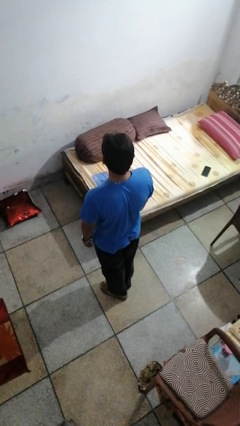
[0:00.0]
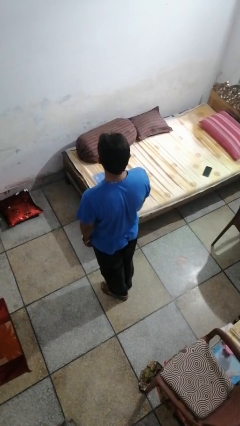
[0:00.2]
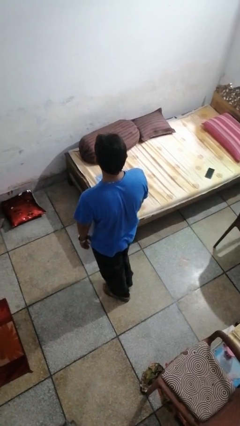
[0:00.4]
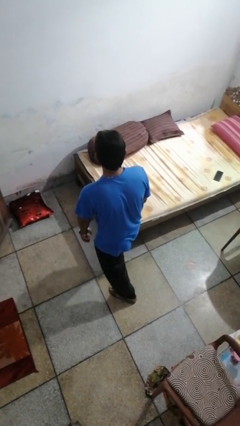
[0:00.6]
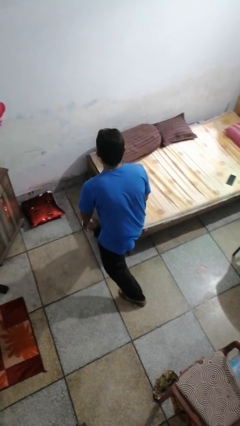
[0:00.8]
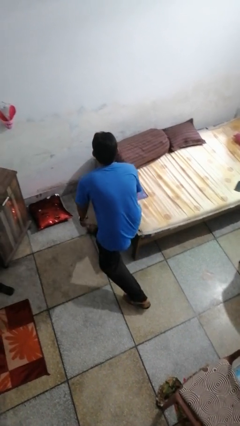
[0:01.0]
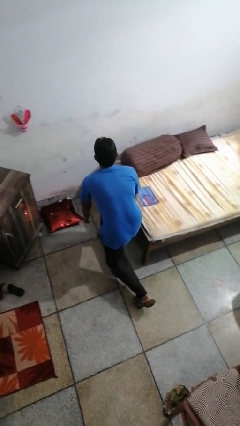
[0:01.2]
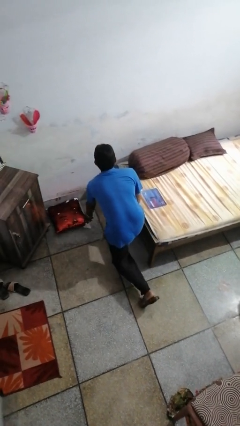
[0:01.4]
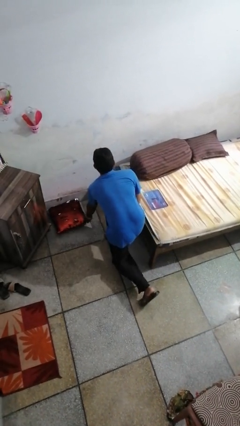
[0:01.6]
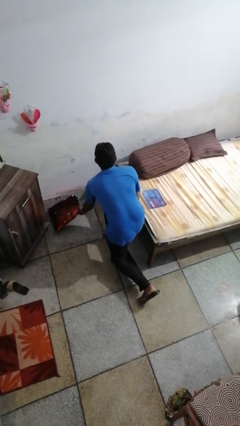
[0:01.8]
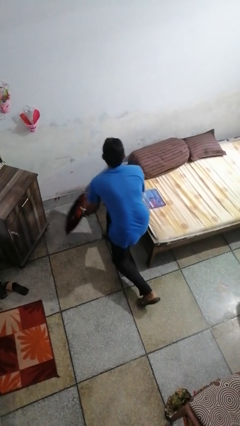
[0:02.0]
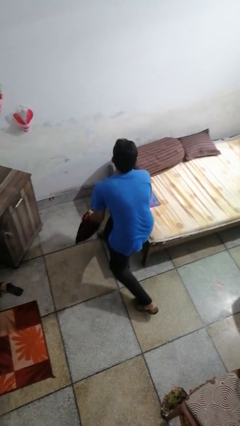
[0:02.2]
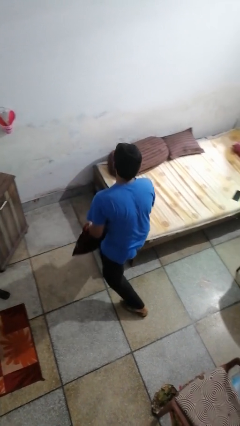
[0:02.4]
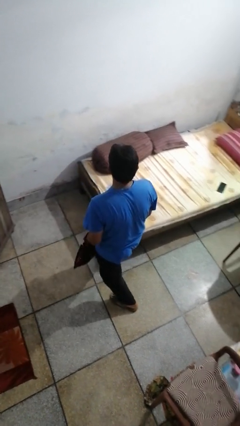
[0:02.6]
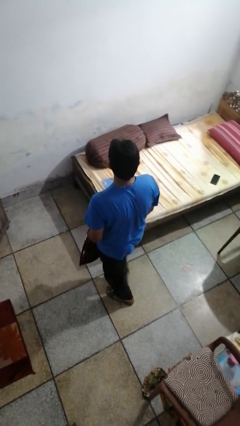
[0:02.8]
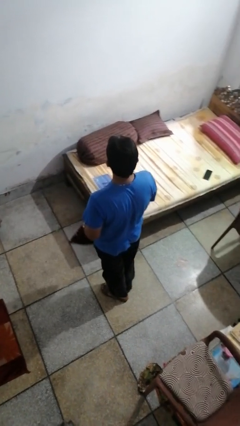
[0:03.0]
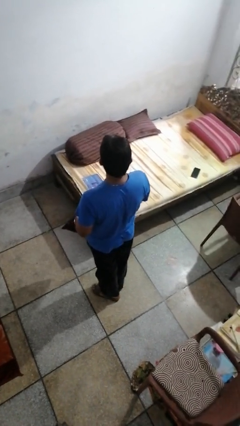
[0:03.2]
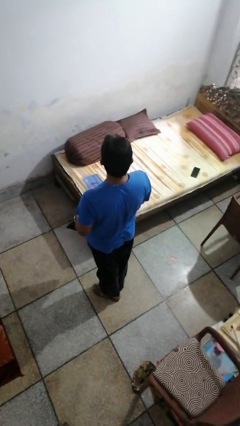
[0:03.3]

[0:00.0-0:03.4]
person picks up object from floor

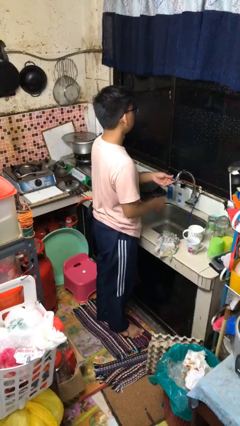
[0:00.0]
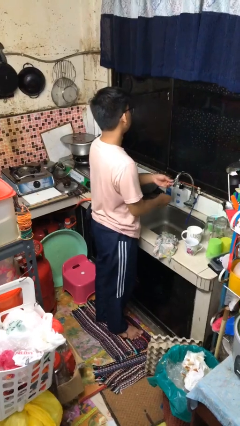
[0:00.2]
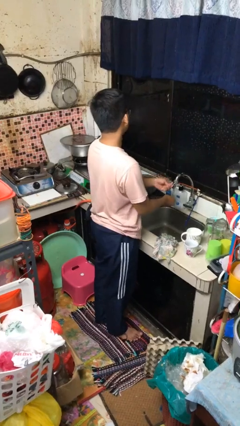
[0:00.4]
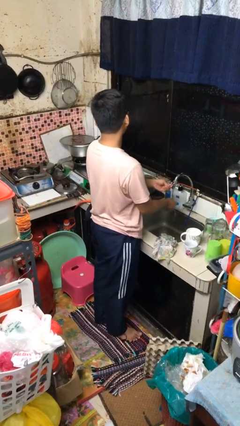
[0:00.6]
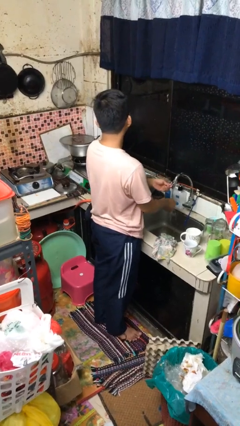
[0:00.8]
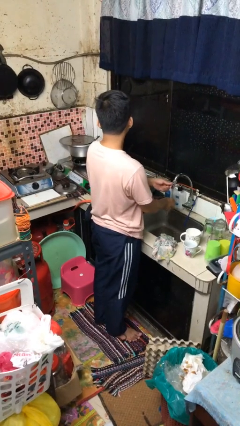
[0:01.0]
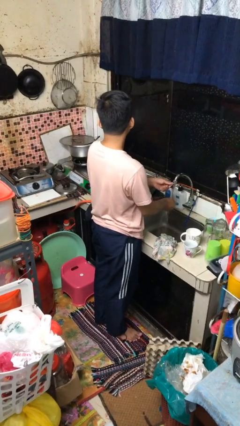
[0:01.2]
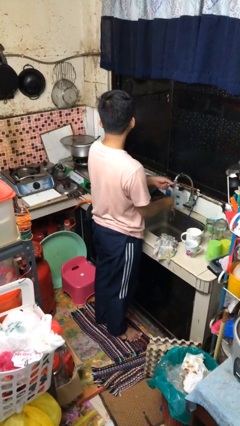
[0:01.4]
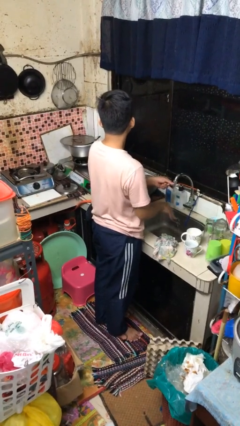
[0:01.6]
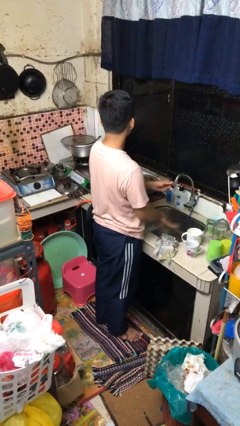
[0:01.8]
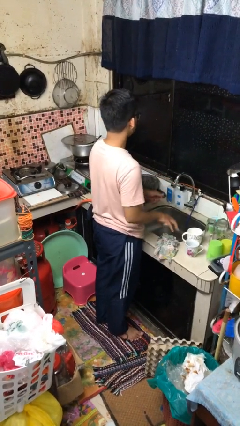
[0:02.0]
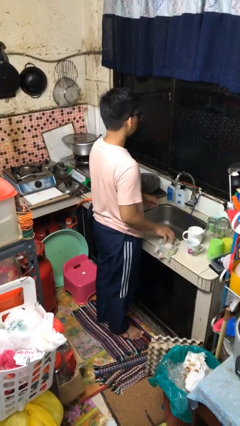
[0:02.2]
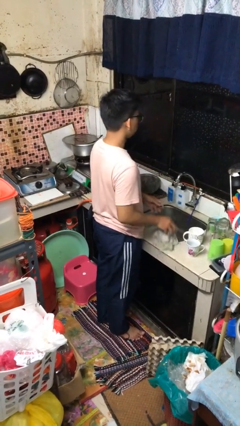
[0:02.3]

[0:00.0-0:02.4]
person washes hands

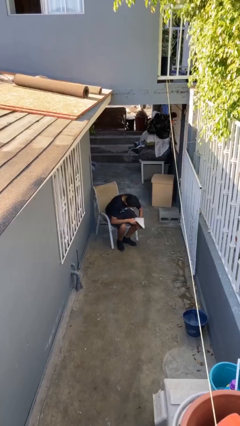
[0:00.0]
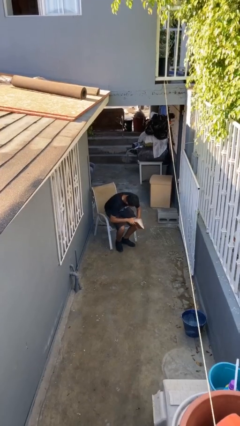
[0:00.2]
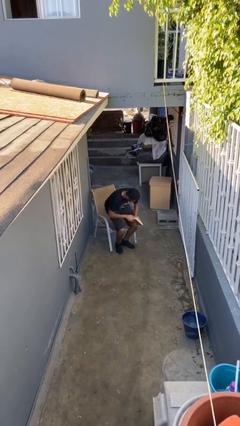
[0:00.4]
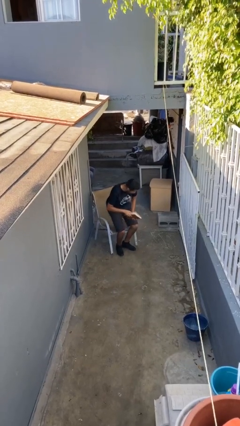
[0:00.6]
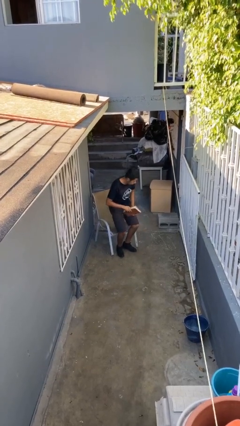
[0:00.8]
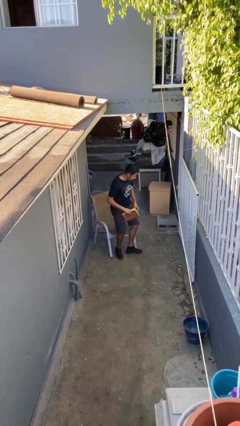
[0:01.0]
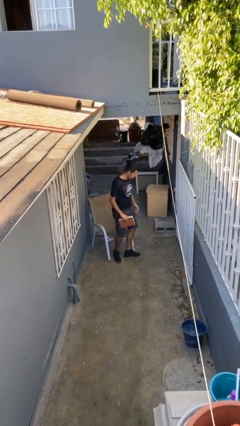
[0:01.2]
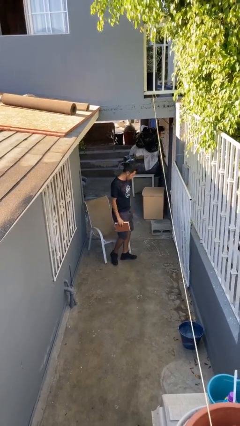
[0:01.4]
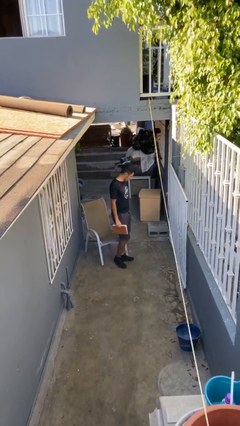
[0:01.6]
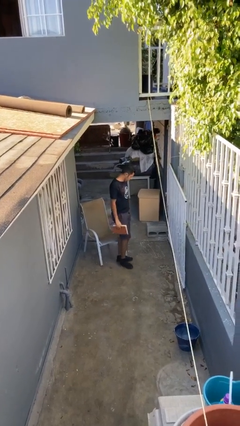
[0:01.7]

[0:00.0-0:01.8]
person stands up

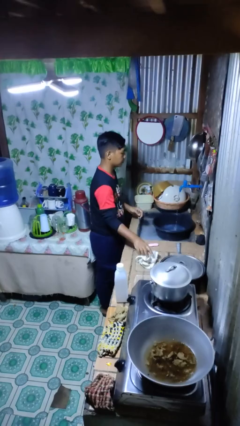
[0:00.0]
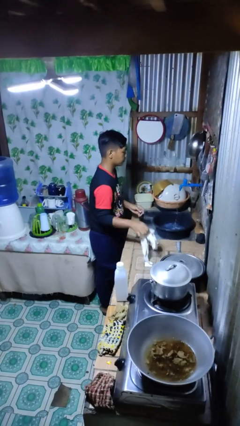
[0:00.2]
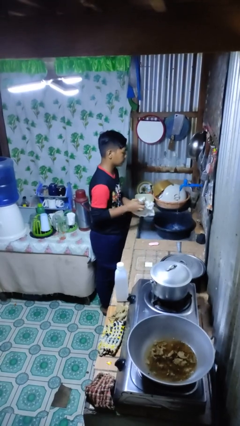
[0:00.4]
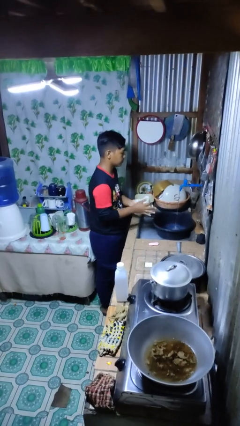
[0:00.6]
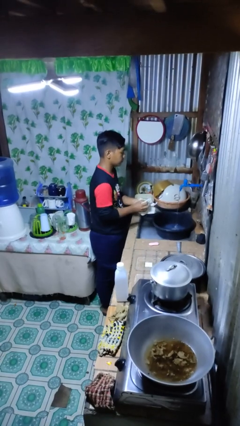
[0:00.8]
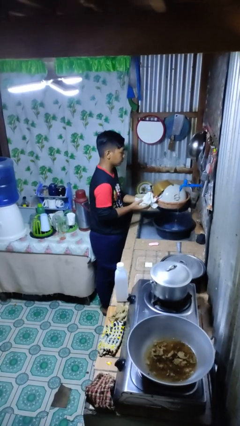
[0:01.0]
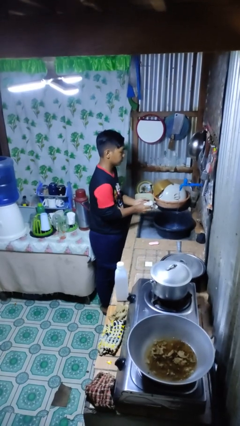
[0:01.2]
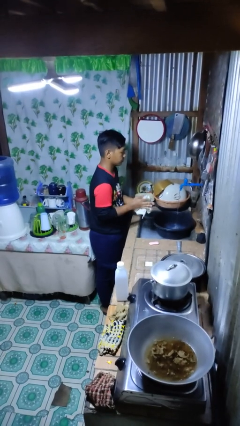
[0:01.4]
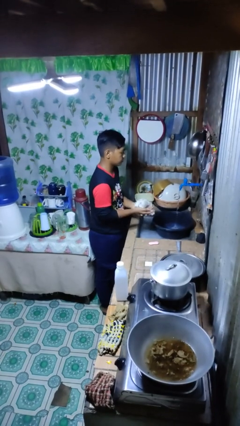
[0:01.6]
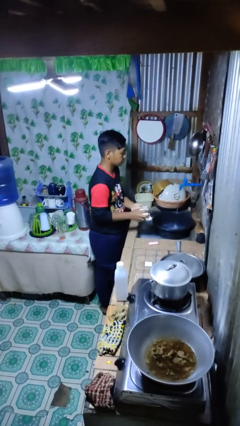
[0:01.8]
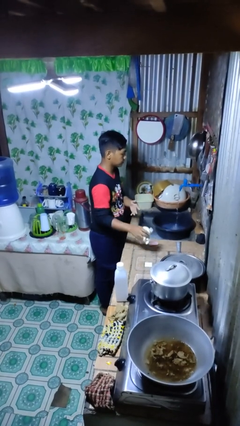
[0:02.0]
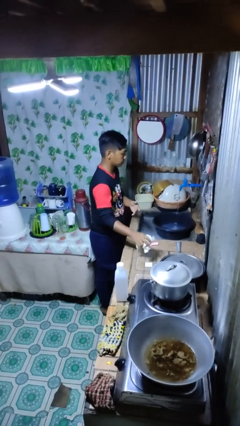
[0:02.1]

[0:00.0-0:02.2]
person dries hands with towel

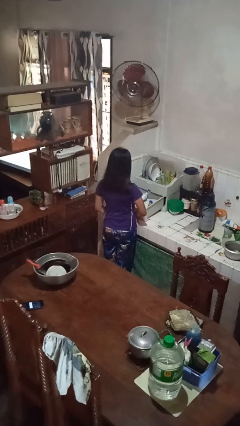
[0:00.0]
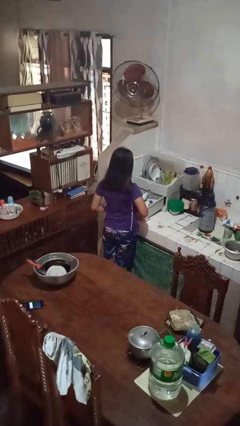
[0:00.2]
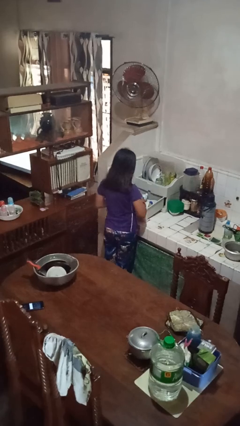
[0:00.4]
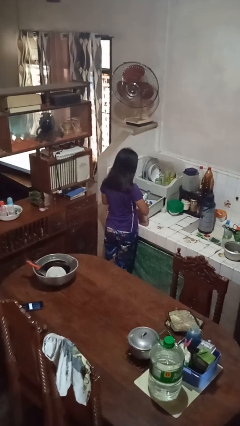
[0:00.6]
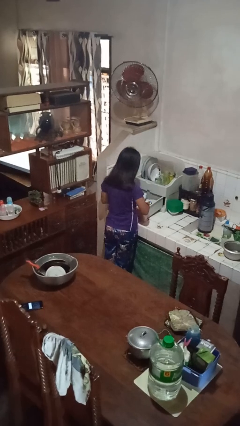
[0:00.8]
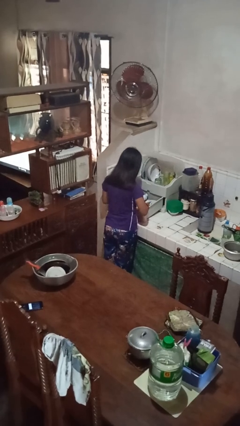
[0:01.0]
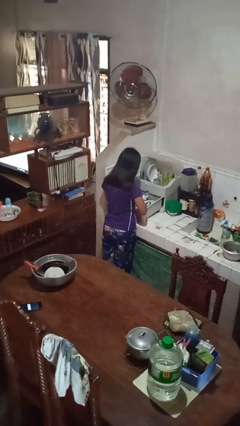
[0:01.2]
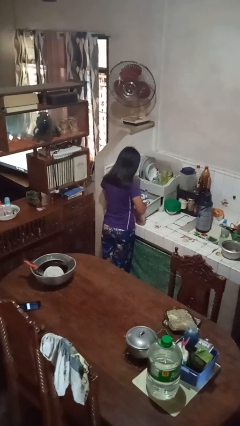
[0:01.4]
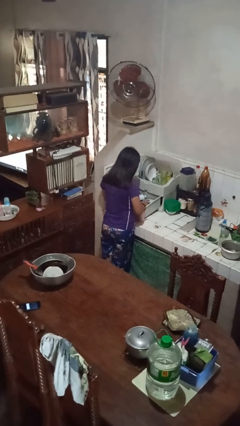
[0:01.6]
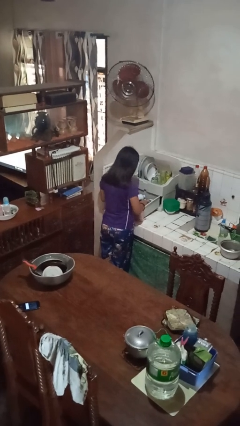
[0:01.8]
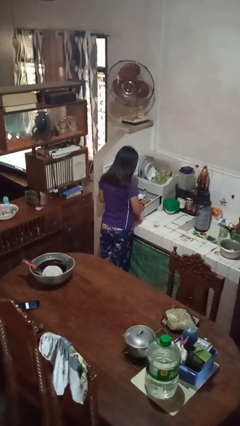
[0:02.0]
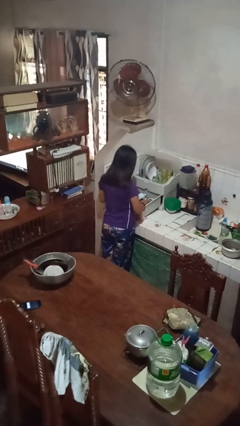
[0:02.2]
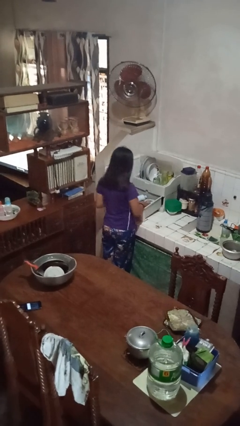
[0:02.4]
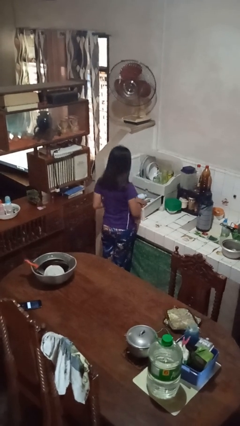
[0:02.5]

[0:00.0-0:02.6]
person searches in kitchen drawer

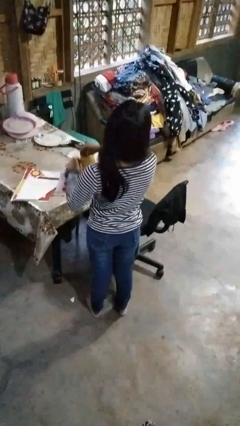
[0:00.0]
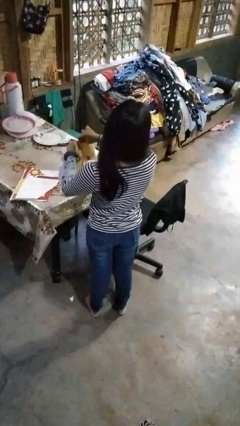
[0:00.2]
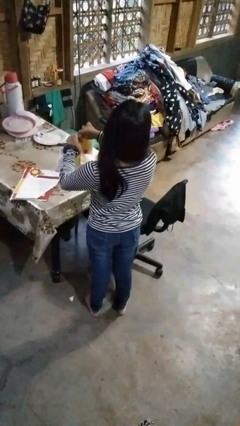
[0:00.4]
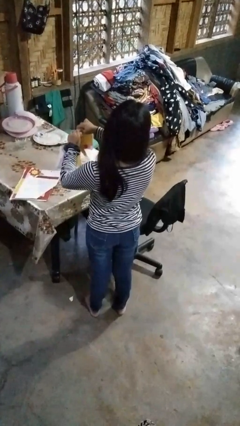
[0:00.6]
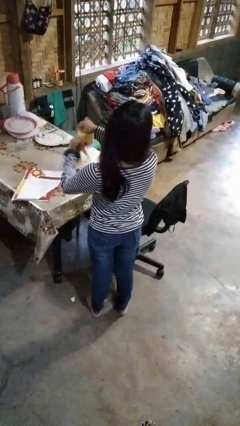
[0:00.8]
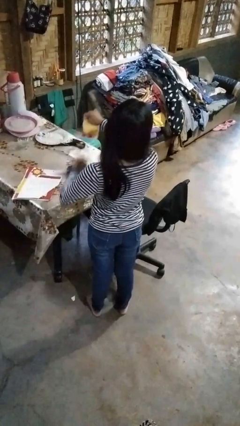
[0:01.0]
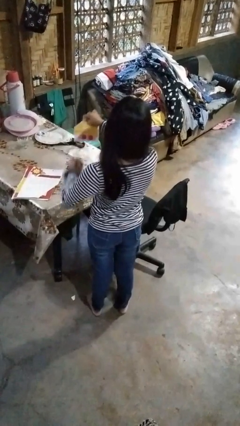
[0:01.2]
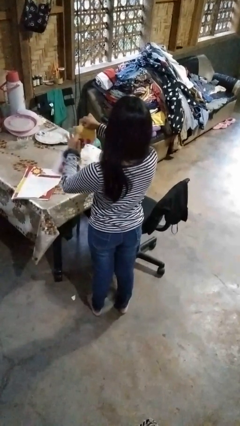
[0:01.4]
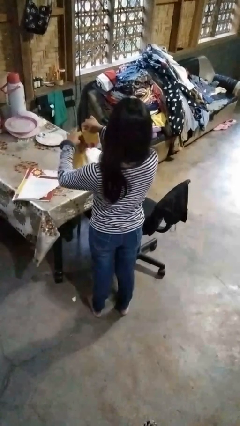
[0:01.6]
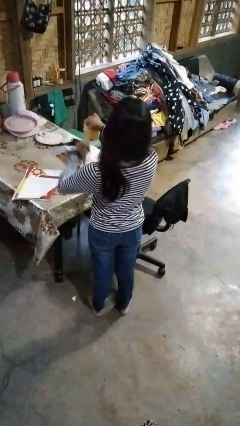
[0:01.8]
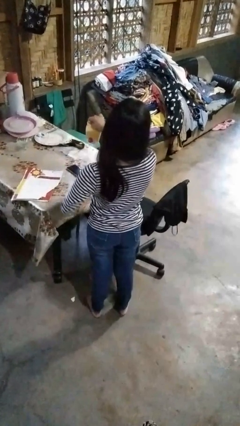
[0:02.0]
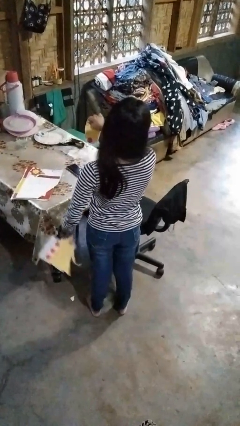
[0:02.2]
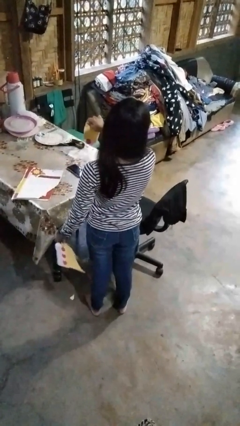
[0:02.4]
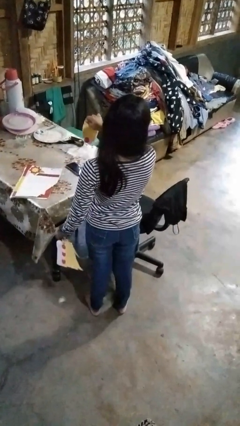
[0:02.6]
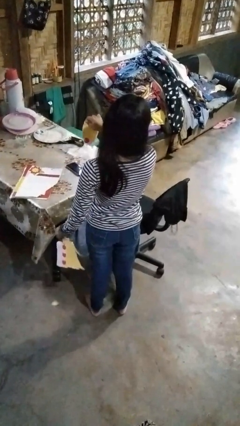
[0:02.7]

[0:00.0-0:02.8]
person tears paper

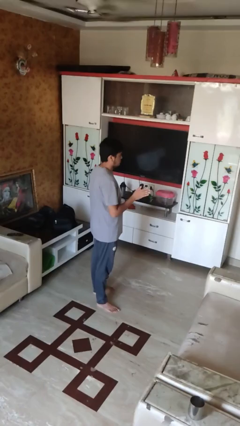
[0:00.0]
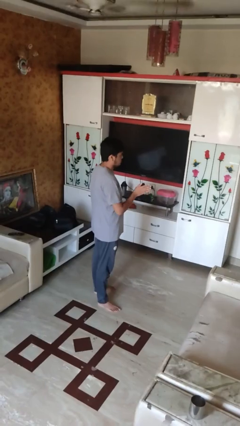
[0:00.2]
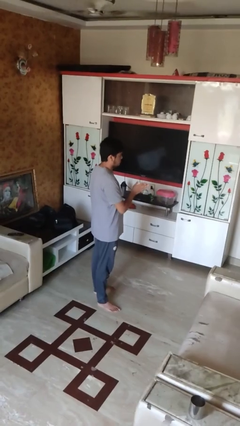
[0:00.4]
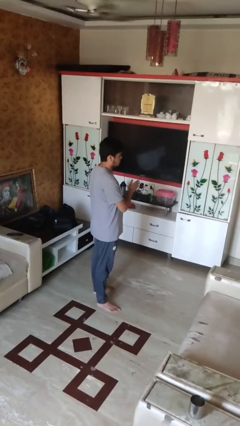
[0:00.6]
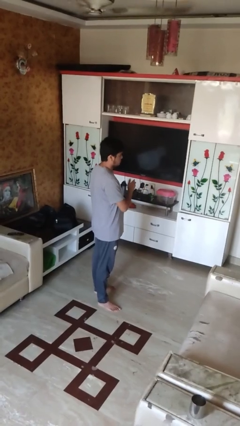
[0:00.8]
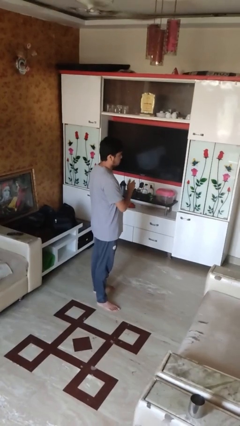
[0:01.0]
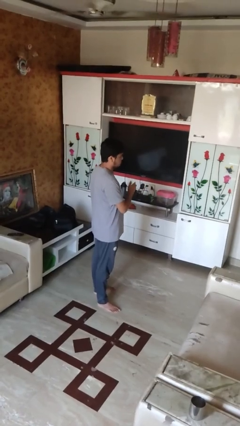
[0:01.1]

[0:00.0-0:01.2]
person gestures swipe right

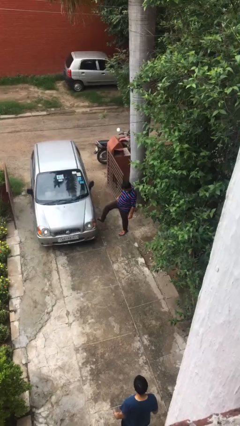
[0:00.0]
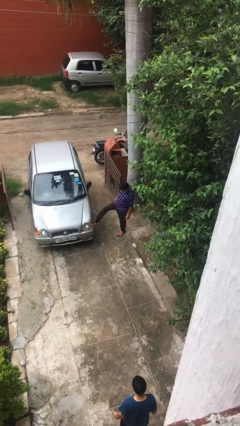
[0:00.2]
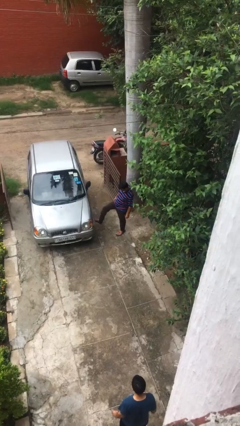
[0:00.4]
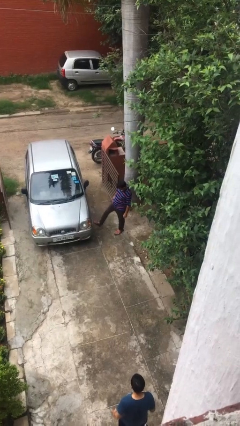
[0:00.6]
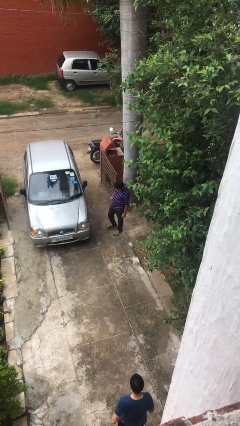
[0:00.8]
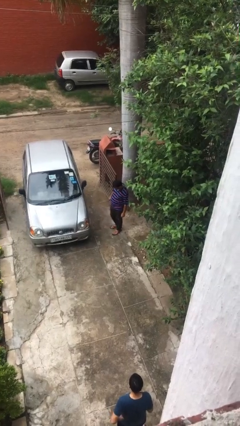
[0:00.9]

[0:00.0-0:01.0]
person kicks car tires
